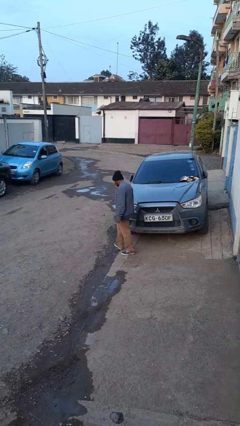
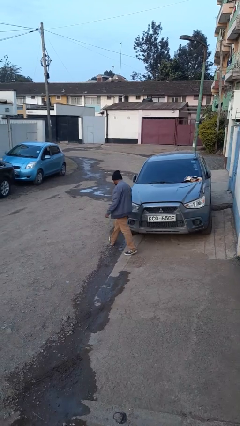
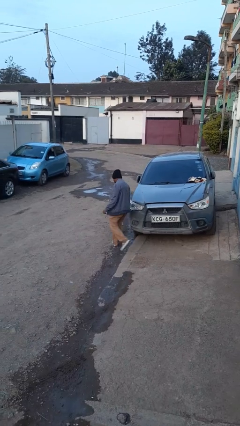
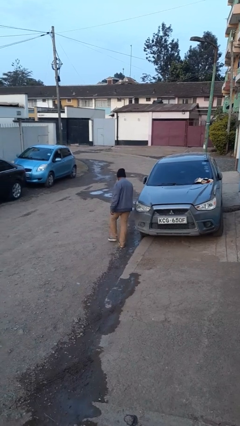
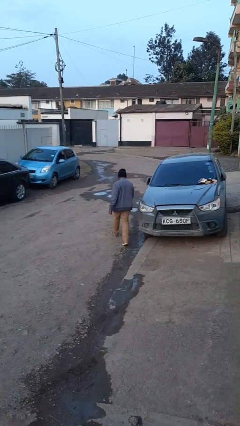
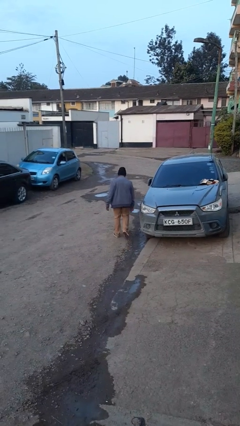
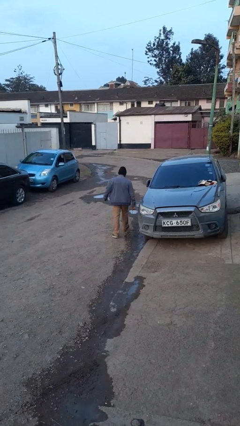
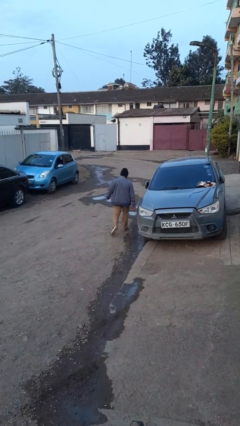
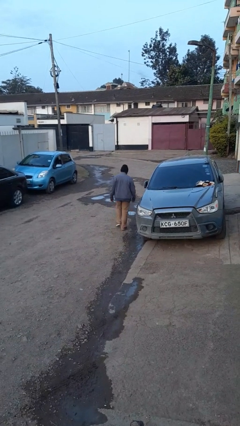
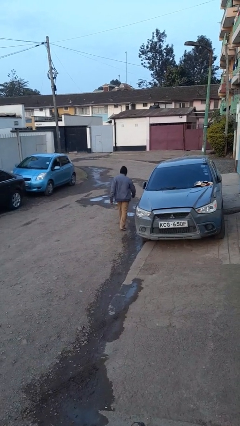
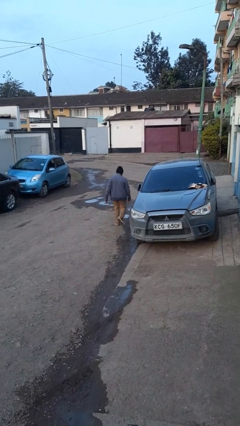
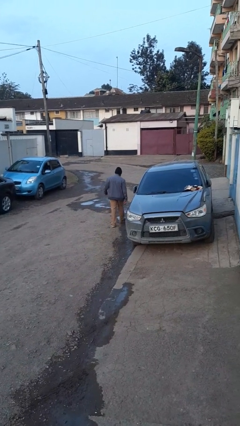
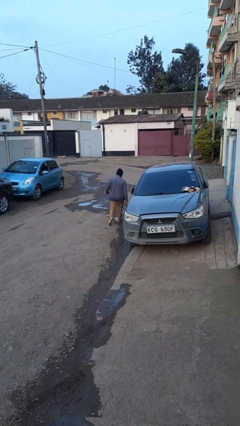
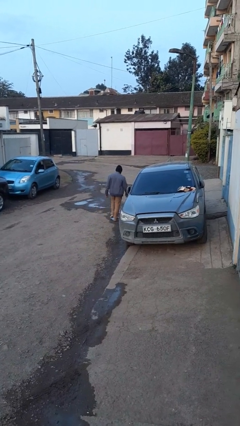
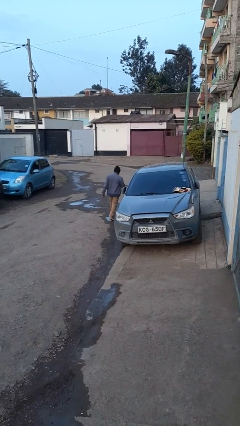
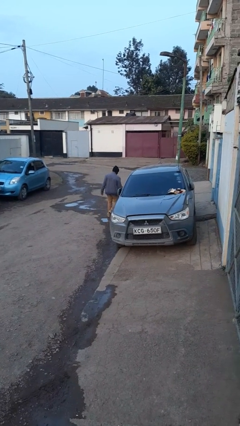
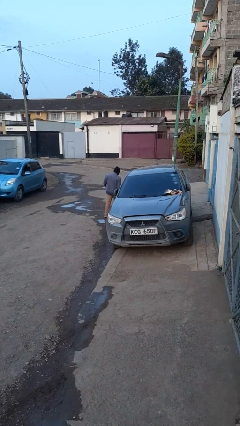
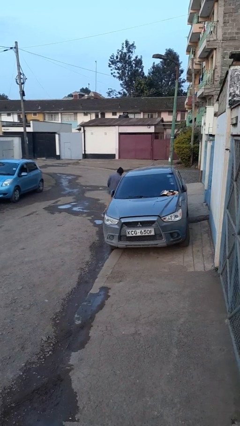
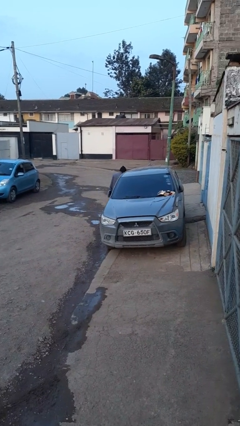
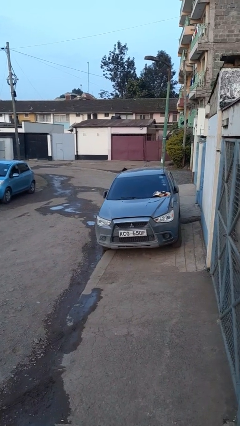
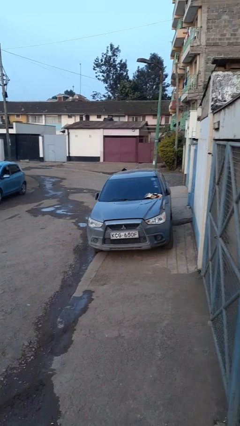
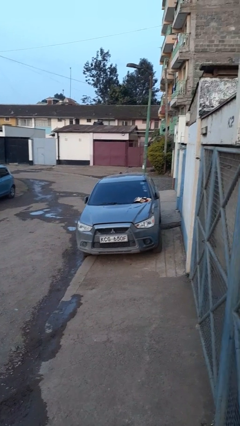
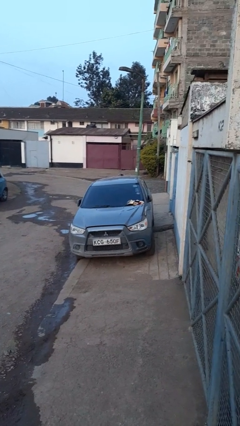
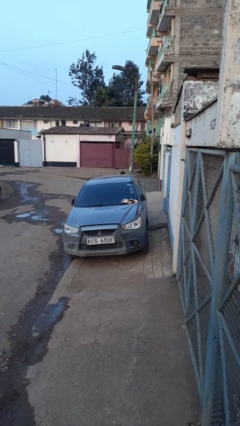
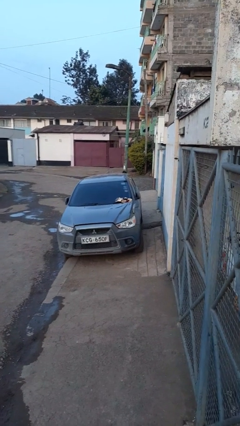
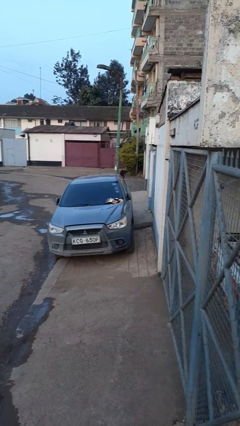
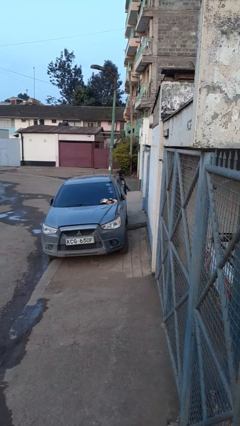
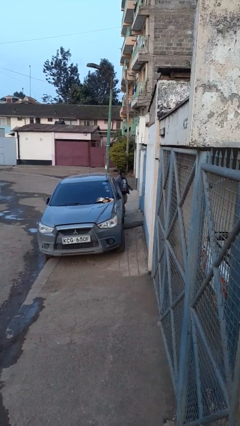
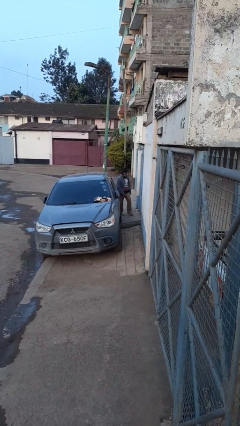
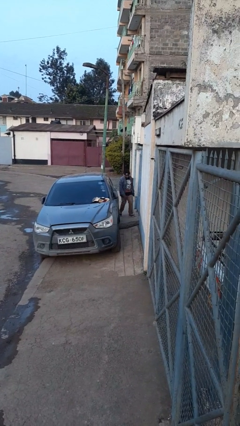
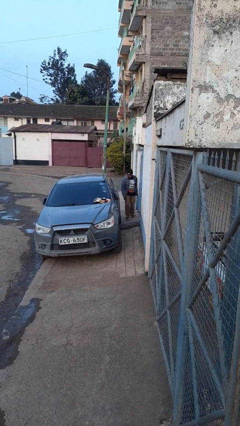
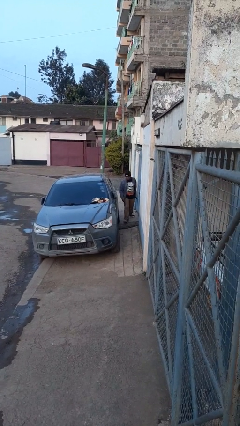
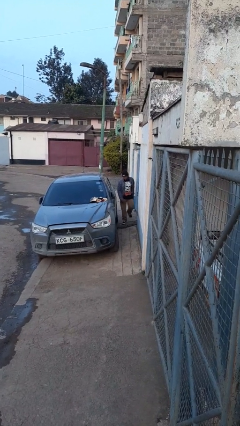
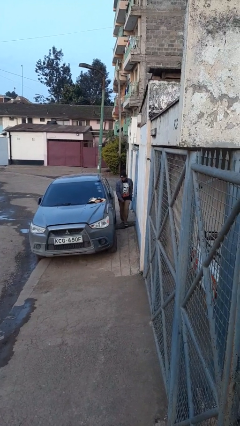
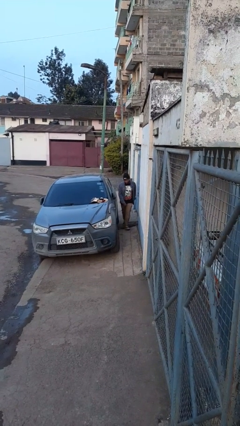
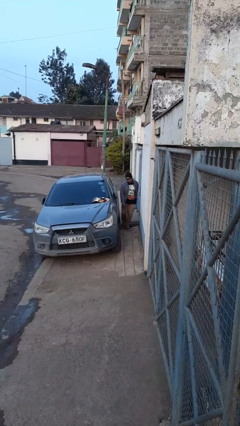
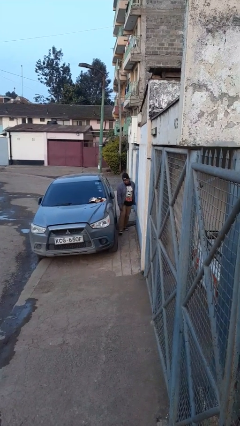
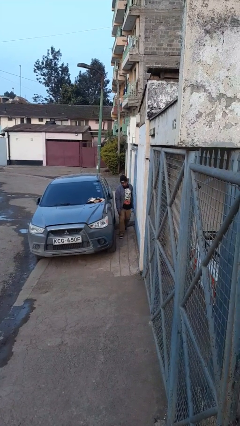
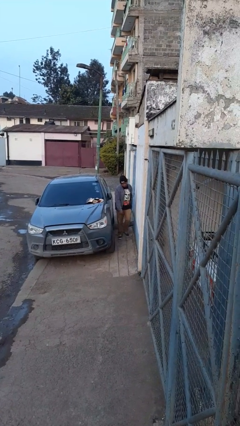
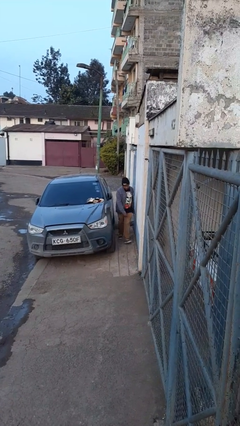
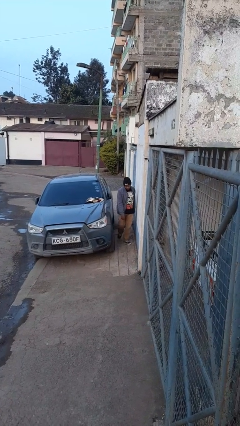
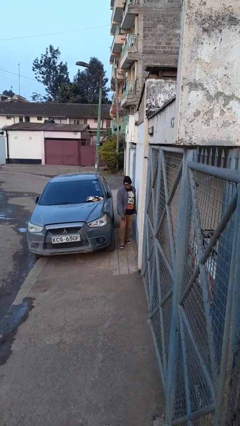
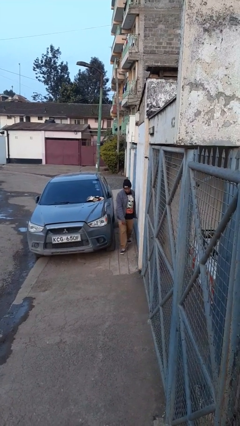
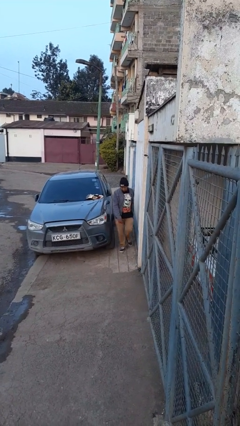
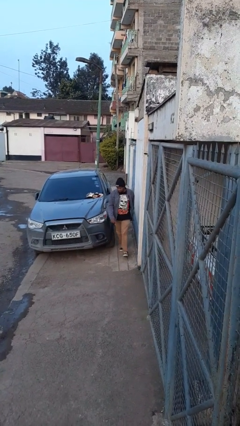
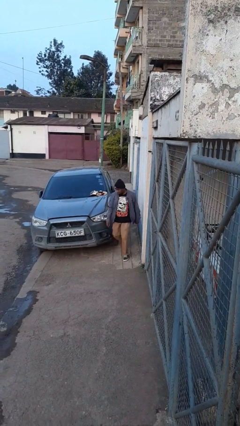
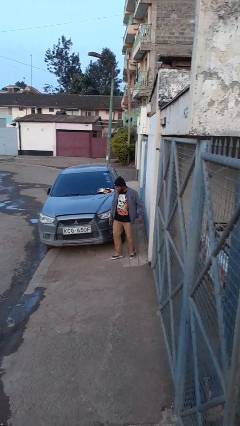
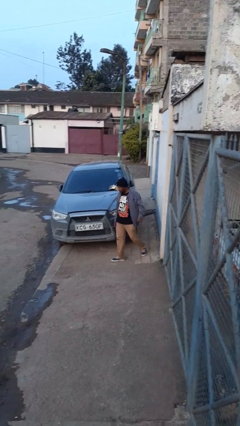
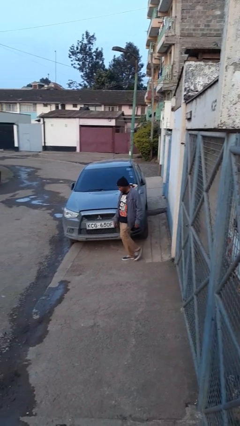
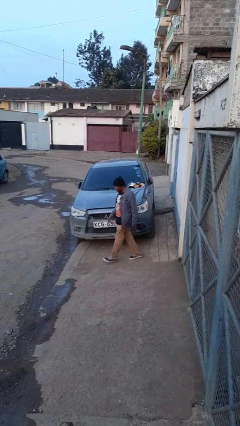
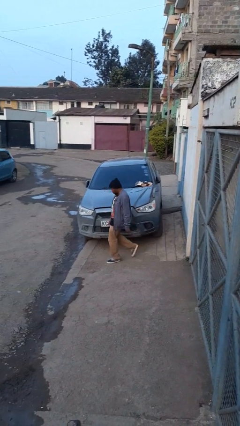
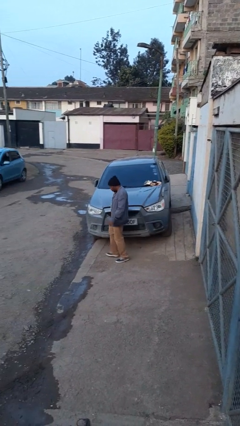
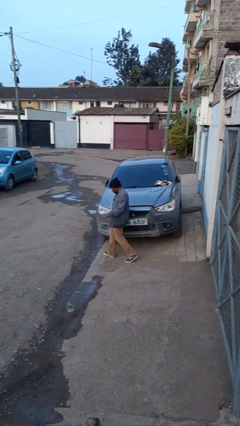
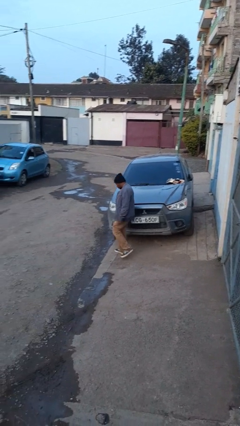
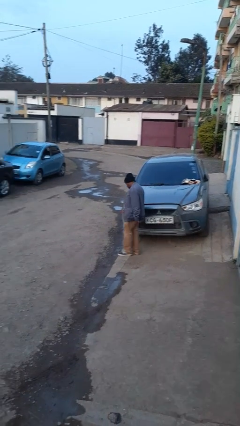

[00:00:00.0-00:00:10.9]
person walks around car

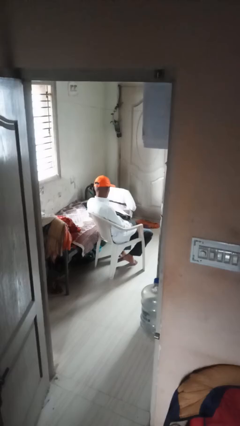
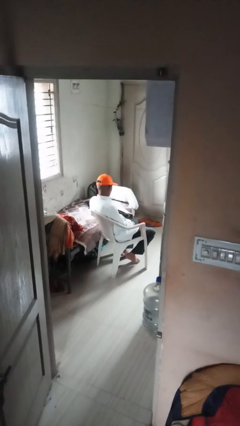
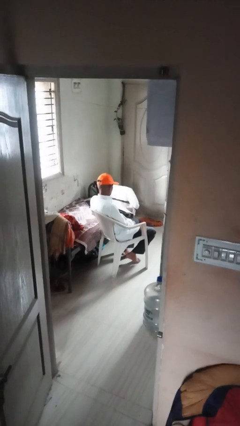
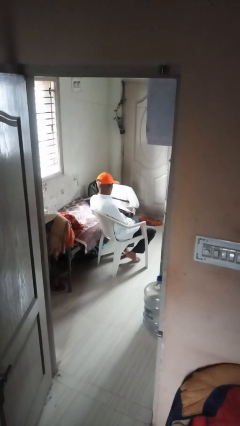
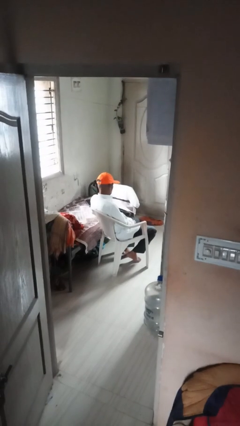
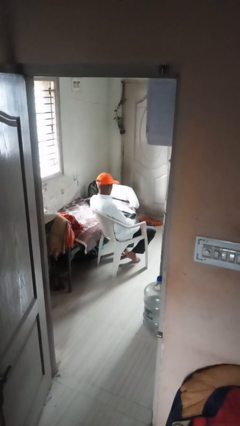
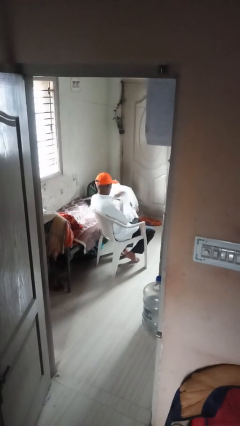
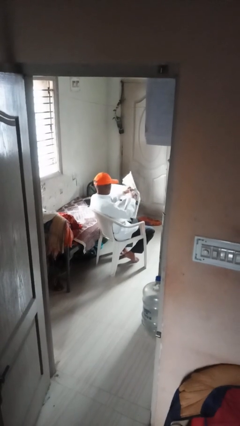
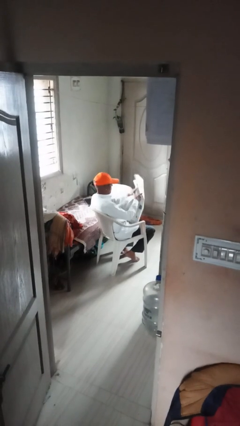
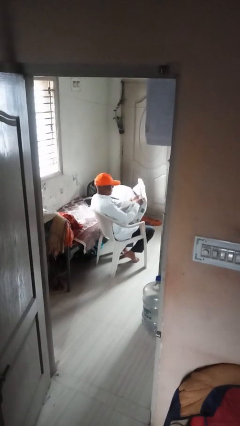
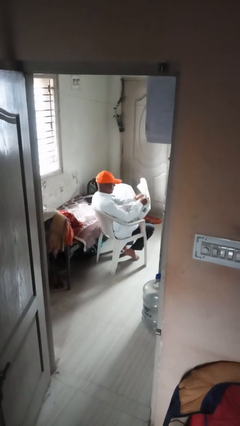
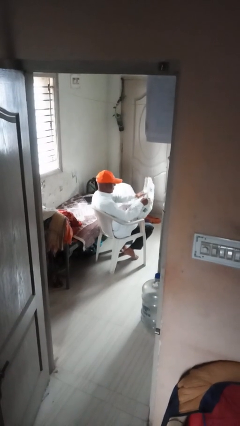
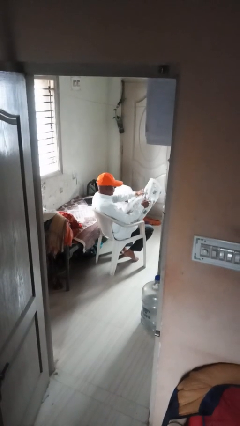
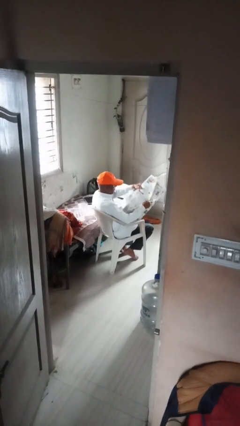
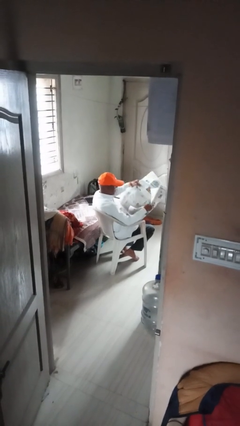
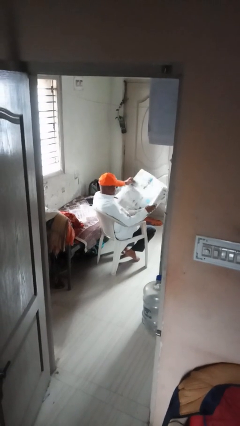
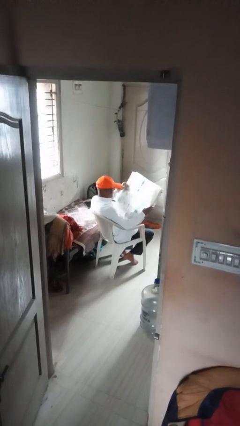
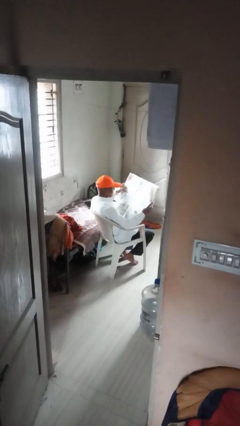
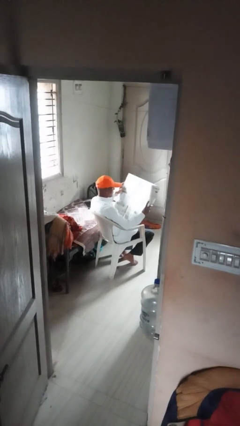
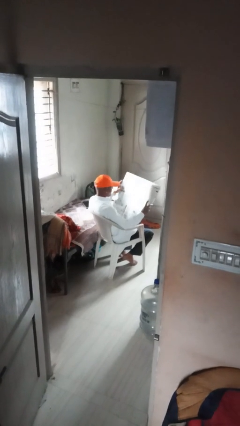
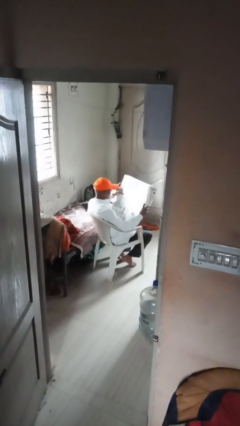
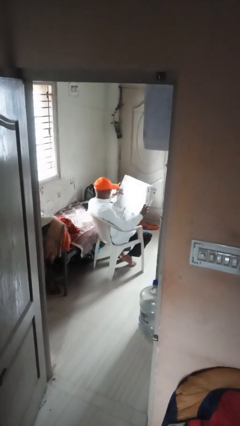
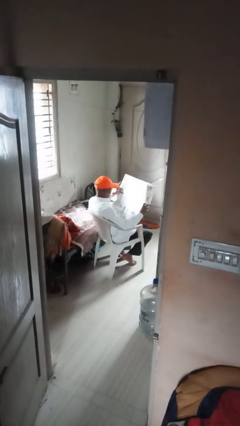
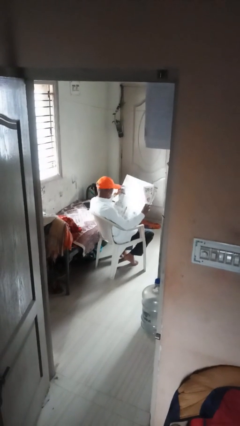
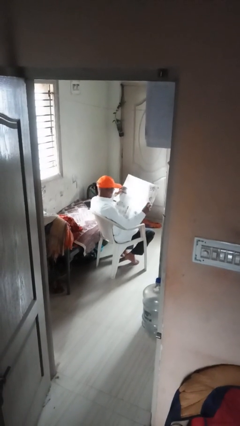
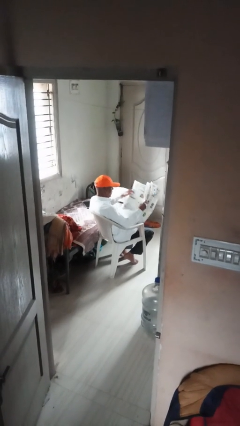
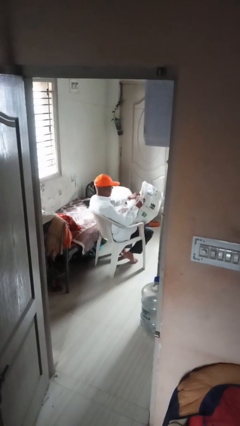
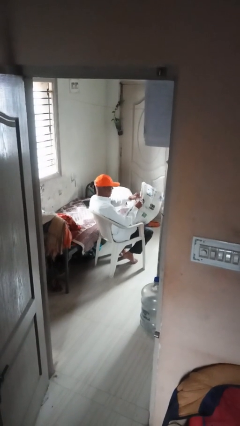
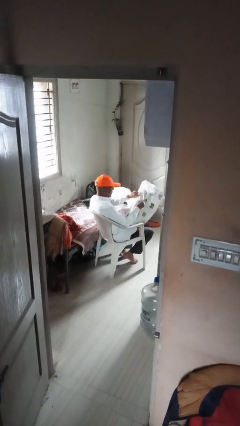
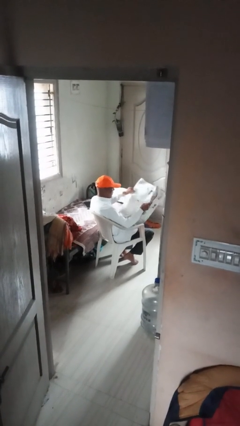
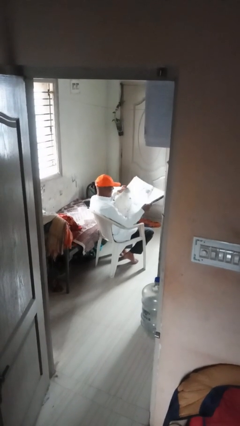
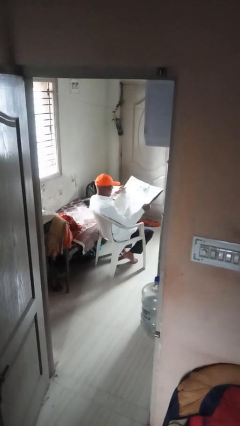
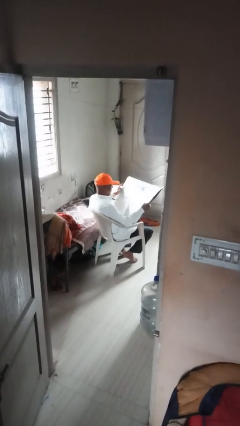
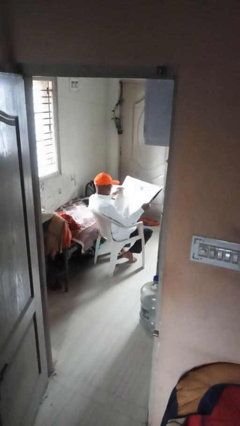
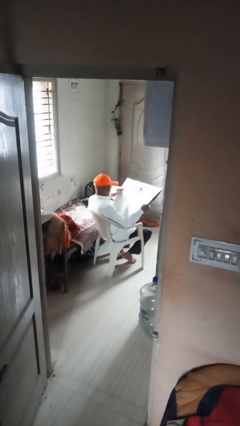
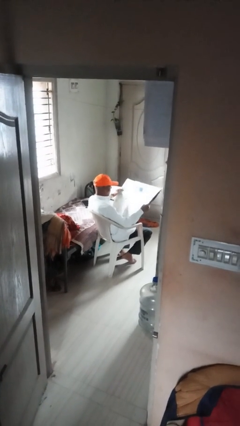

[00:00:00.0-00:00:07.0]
person reads newspaper

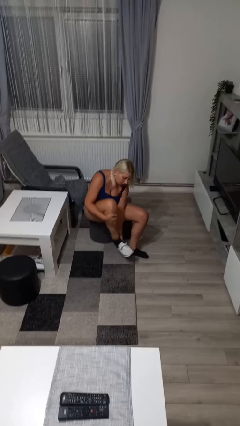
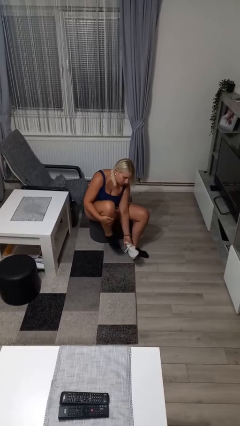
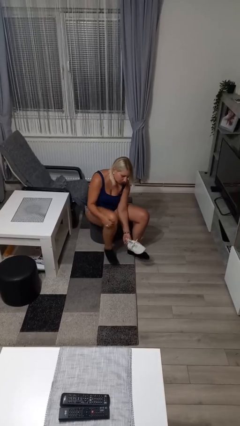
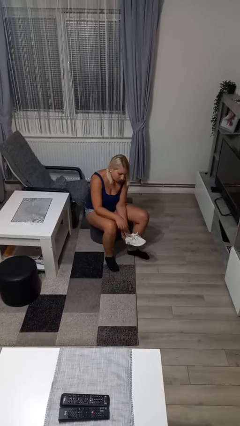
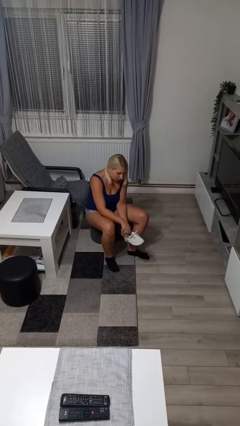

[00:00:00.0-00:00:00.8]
person takes off shoes
